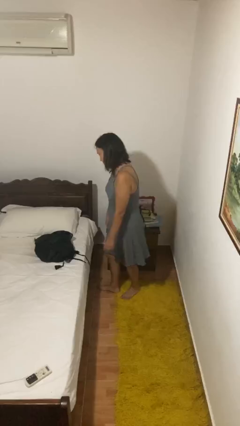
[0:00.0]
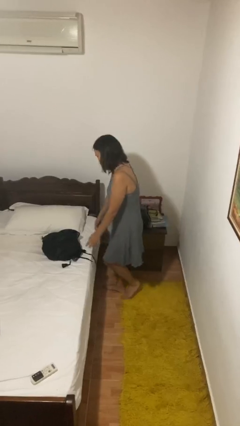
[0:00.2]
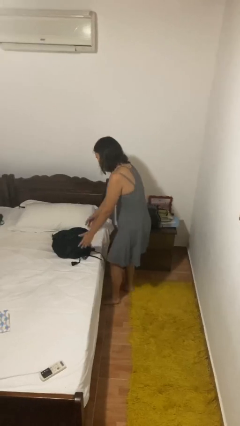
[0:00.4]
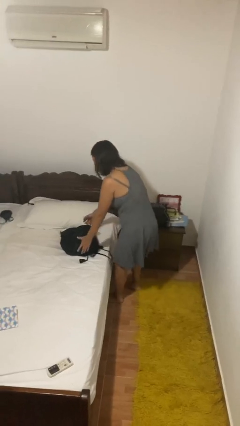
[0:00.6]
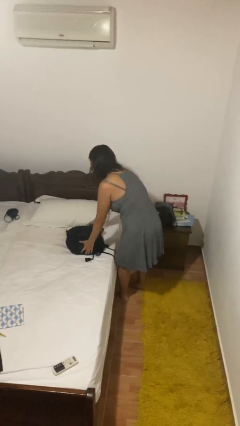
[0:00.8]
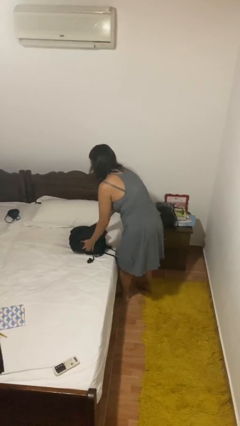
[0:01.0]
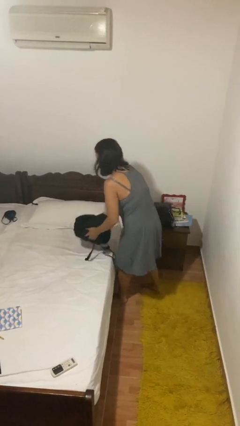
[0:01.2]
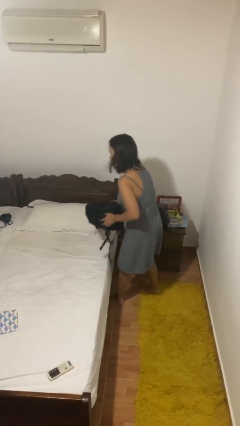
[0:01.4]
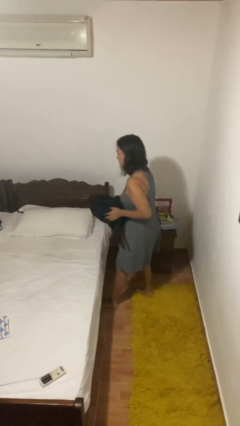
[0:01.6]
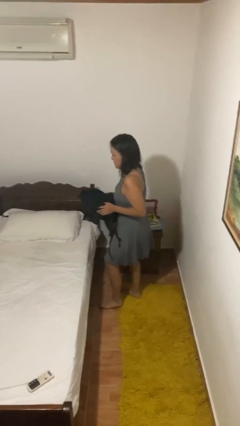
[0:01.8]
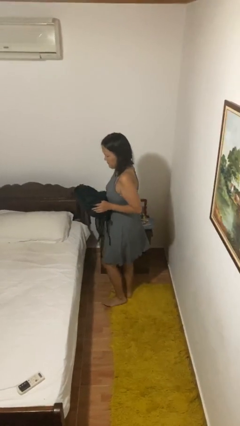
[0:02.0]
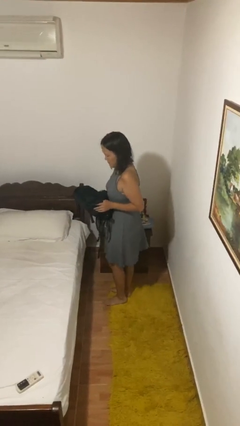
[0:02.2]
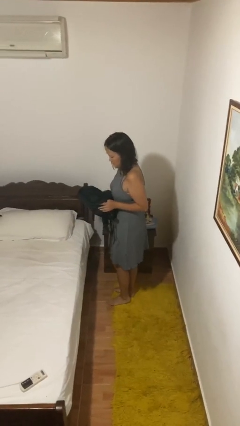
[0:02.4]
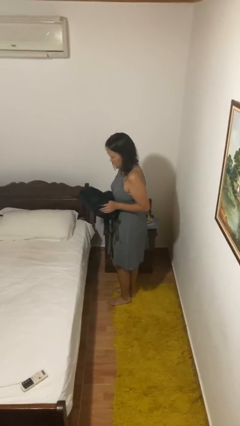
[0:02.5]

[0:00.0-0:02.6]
person picks up object from bed

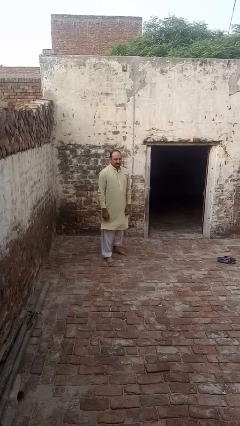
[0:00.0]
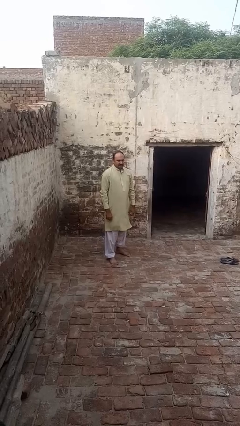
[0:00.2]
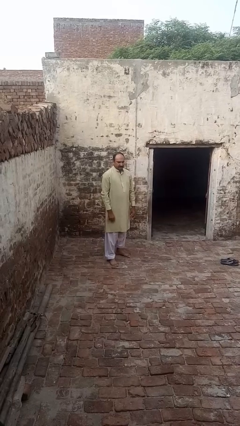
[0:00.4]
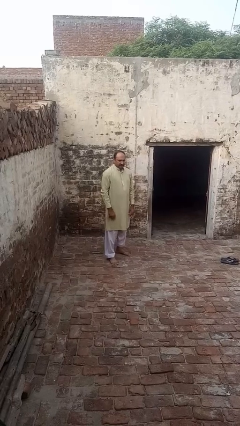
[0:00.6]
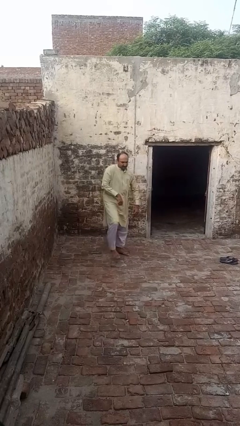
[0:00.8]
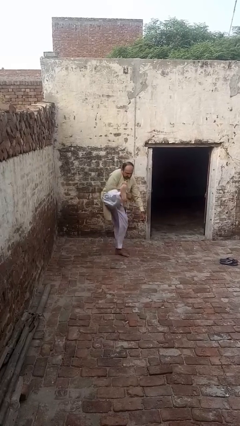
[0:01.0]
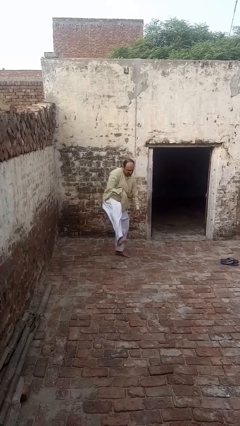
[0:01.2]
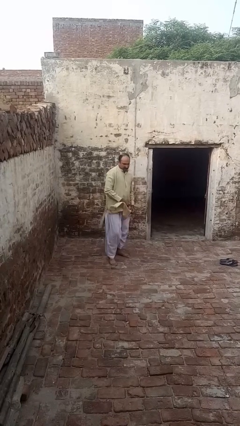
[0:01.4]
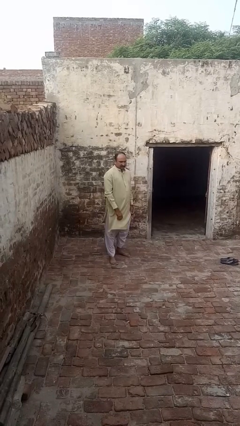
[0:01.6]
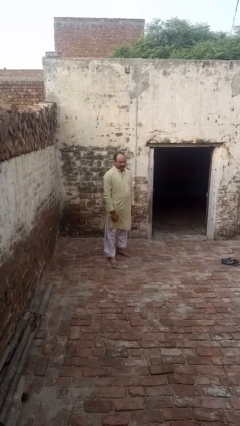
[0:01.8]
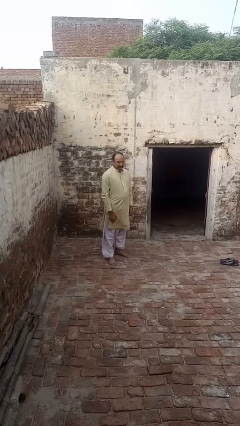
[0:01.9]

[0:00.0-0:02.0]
person karate kicks

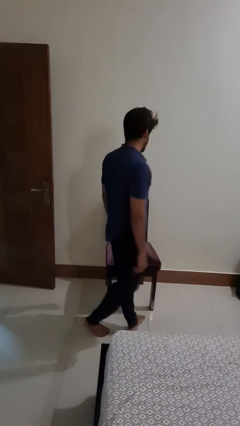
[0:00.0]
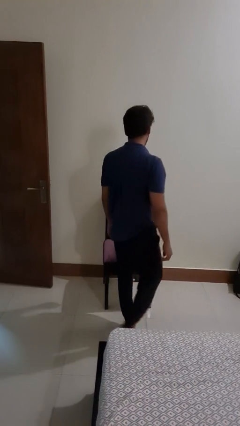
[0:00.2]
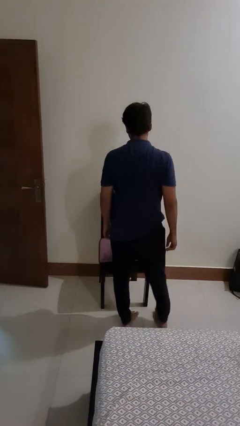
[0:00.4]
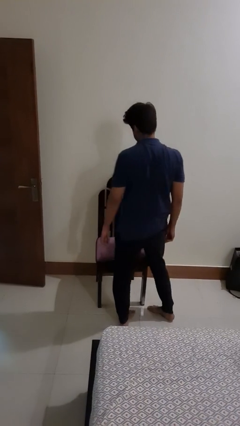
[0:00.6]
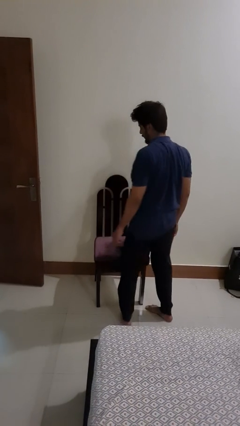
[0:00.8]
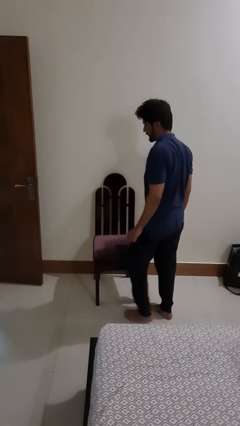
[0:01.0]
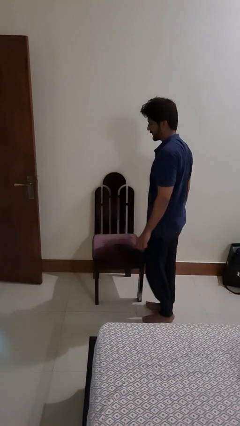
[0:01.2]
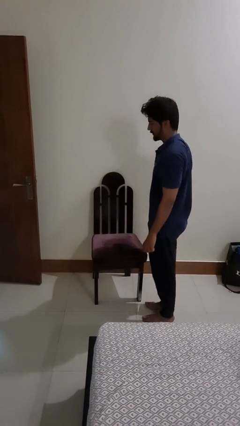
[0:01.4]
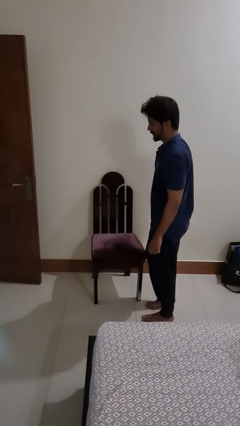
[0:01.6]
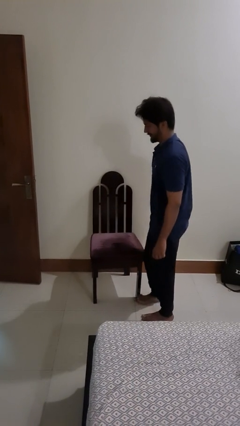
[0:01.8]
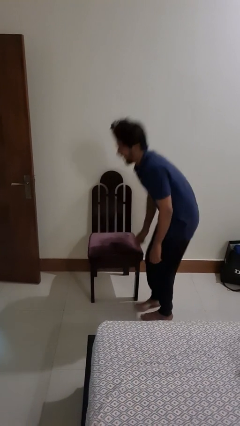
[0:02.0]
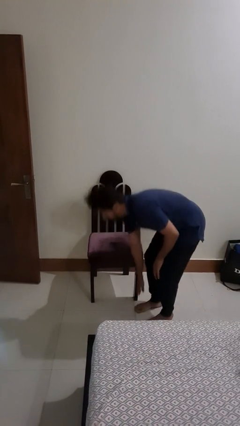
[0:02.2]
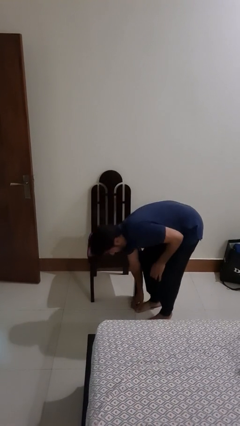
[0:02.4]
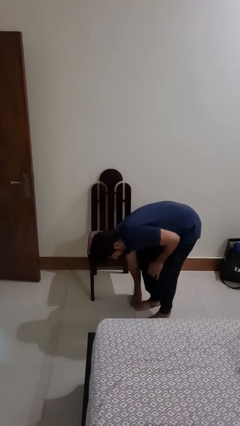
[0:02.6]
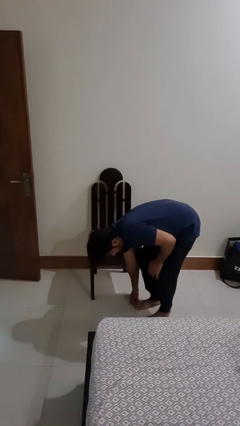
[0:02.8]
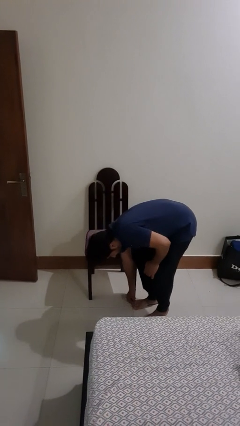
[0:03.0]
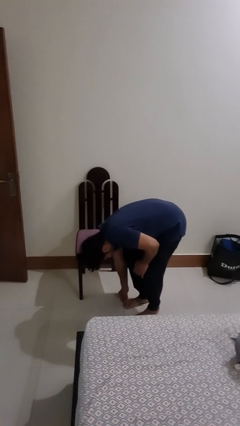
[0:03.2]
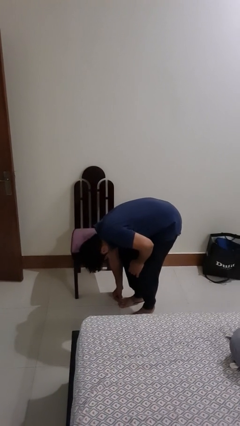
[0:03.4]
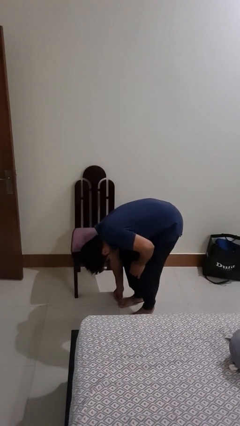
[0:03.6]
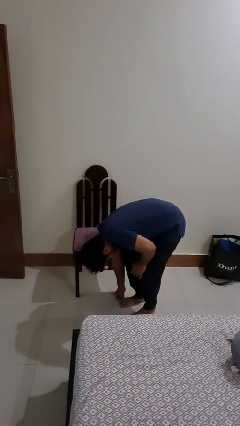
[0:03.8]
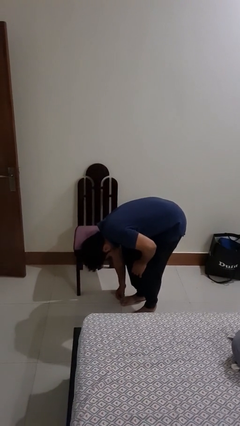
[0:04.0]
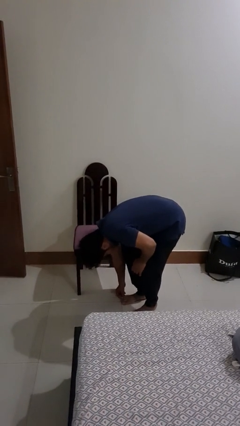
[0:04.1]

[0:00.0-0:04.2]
person stubs toe

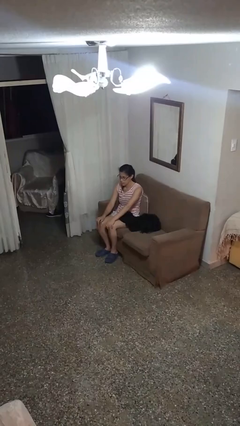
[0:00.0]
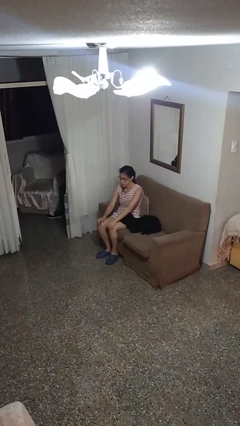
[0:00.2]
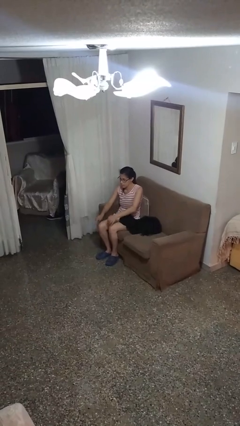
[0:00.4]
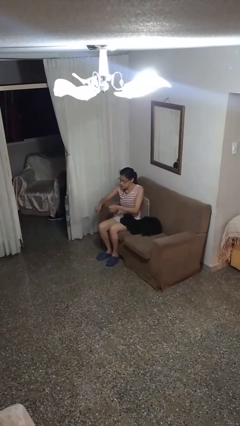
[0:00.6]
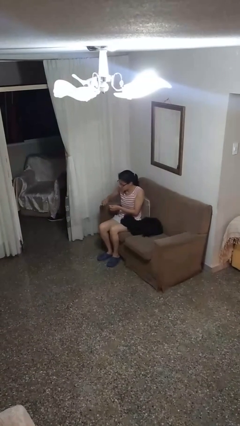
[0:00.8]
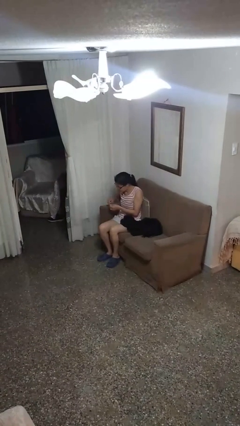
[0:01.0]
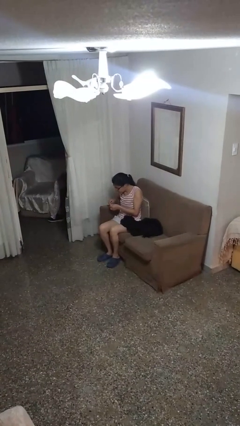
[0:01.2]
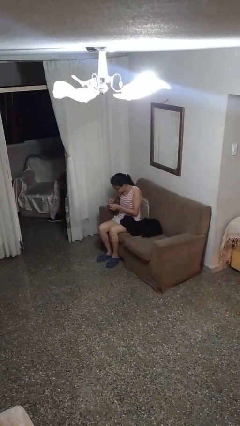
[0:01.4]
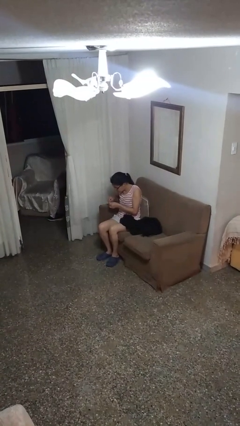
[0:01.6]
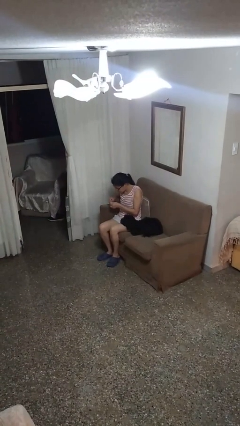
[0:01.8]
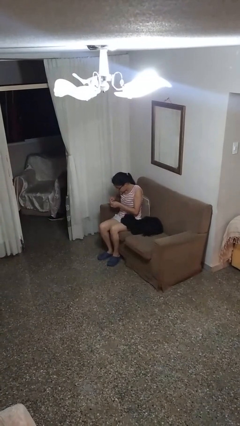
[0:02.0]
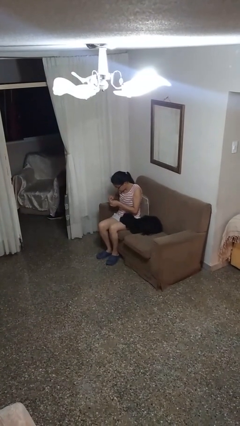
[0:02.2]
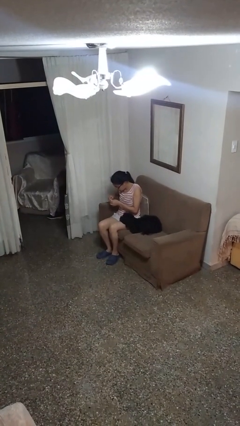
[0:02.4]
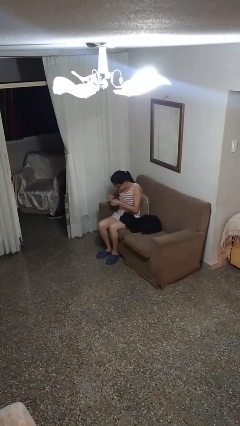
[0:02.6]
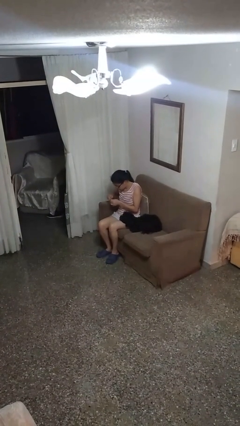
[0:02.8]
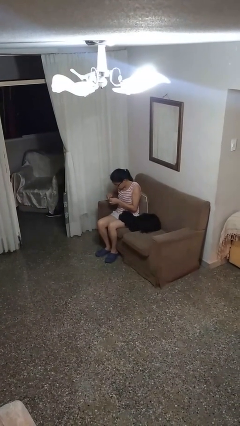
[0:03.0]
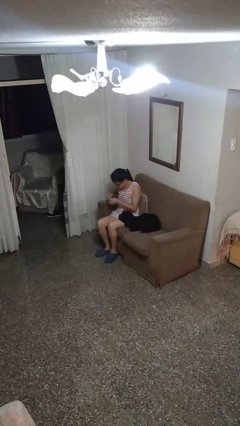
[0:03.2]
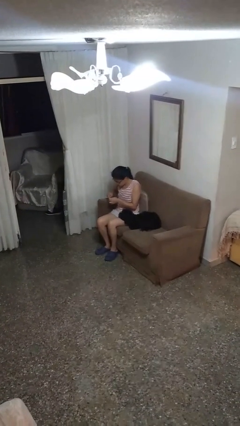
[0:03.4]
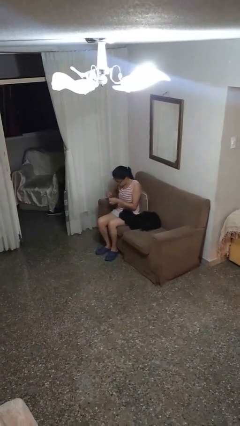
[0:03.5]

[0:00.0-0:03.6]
person files fingernails

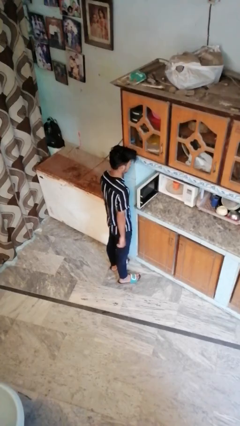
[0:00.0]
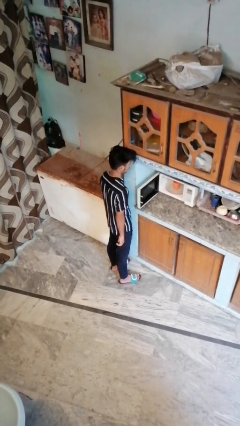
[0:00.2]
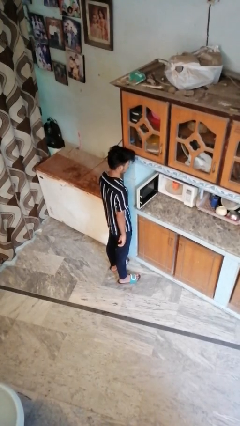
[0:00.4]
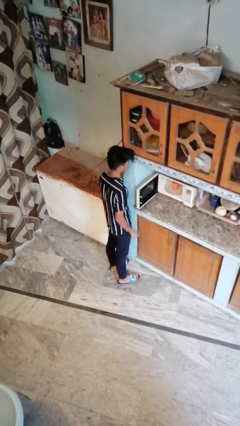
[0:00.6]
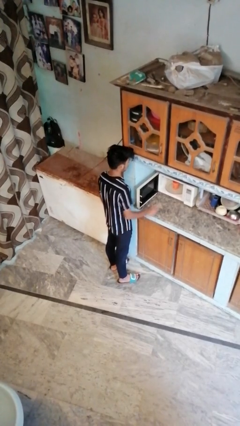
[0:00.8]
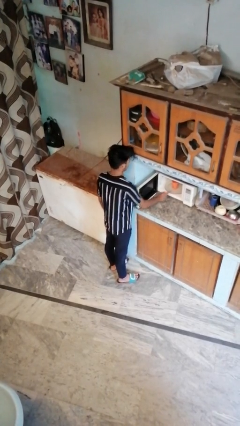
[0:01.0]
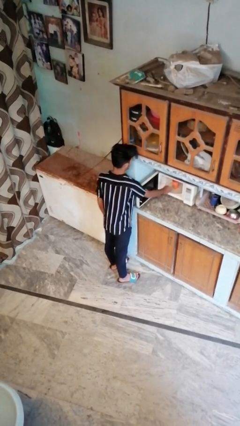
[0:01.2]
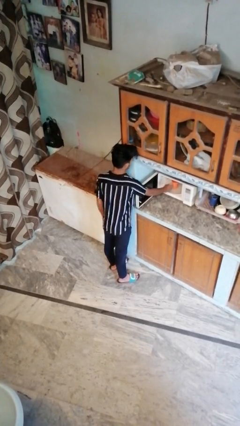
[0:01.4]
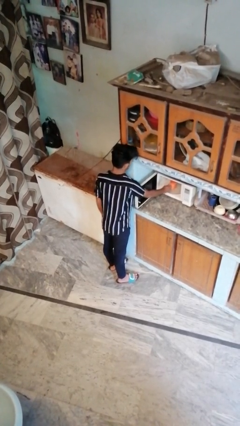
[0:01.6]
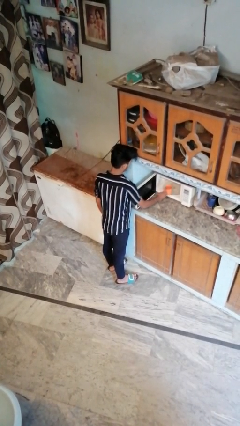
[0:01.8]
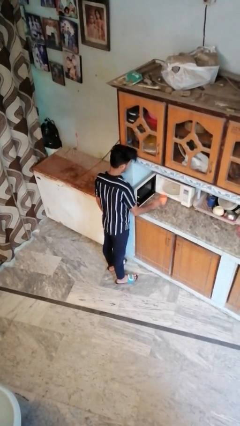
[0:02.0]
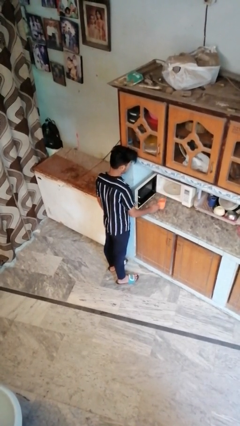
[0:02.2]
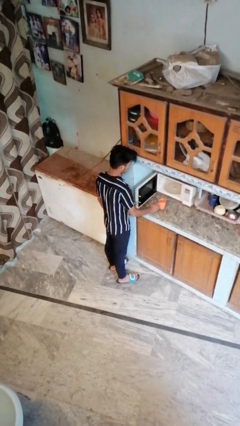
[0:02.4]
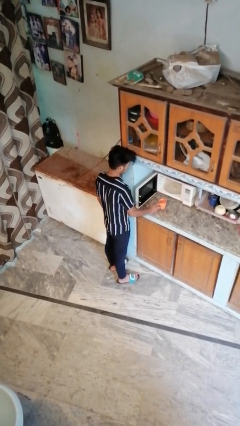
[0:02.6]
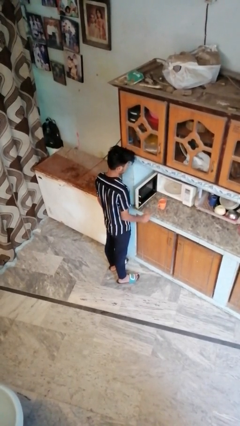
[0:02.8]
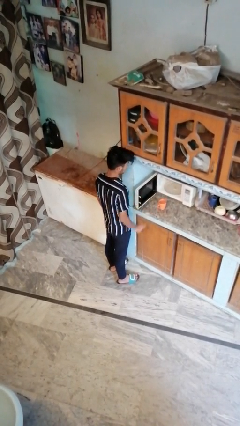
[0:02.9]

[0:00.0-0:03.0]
person takes object from microwave

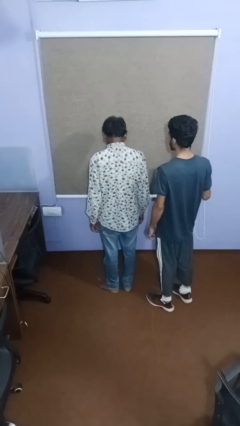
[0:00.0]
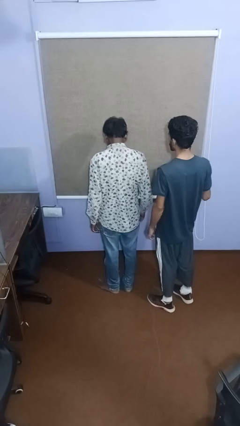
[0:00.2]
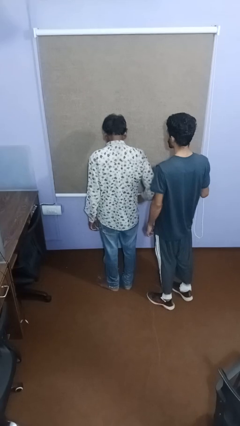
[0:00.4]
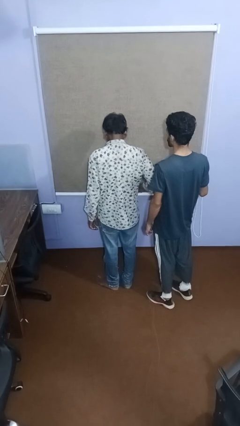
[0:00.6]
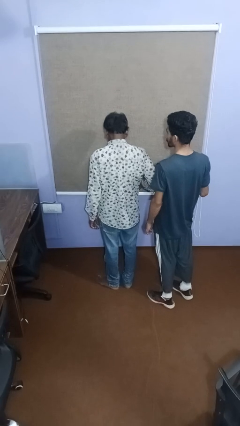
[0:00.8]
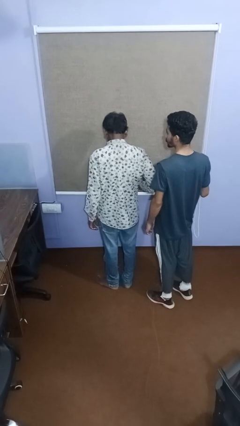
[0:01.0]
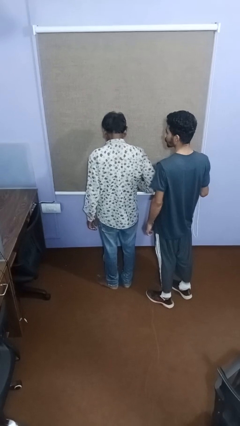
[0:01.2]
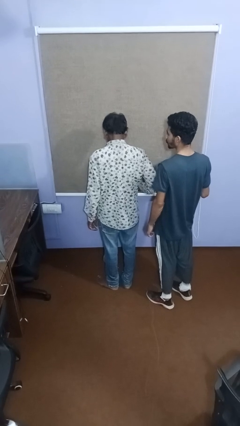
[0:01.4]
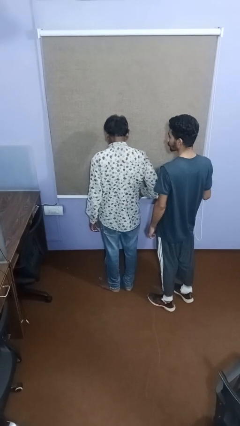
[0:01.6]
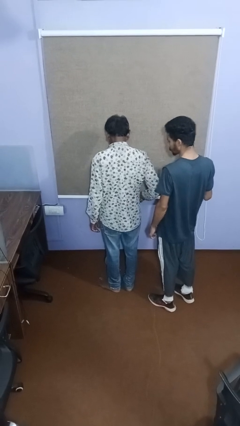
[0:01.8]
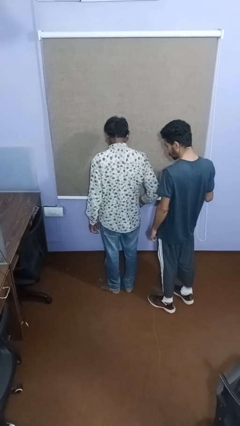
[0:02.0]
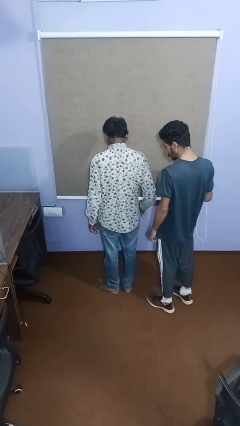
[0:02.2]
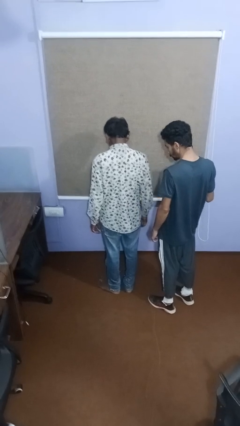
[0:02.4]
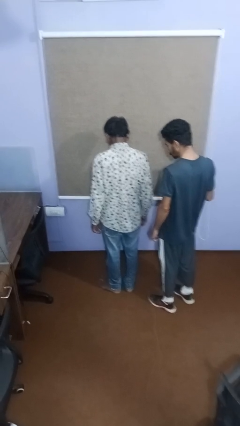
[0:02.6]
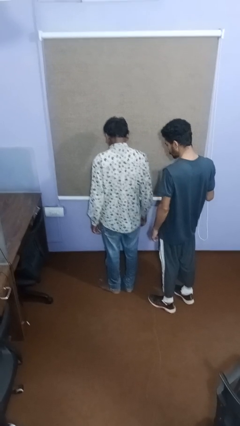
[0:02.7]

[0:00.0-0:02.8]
person nudges person with elbow
